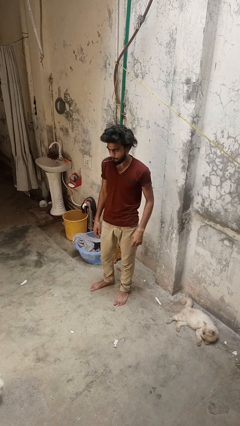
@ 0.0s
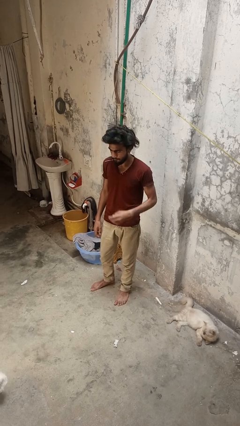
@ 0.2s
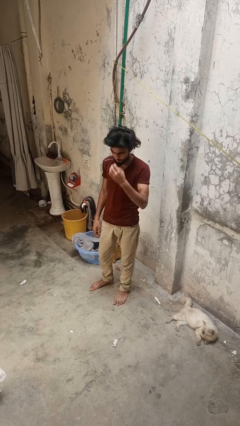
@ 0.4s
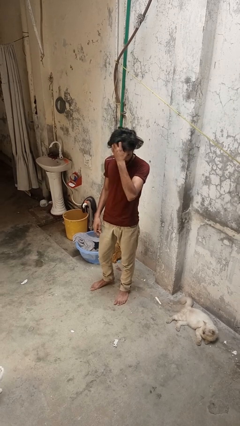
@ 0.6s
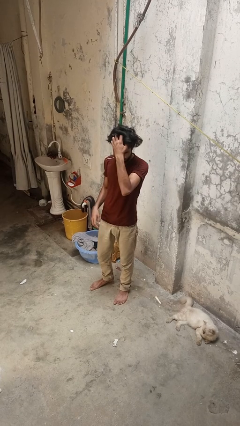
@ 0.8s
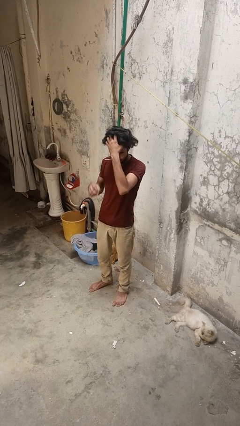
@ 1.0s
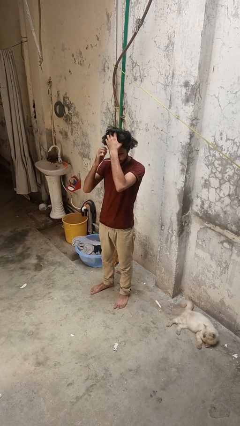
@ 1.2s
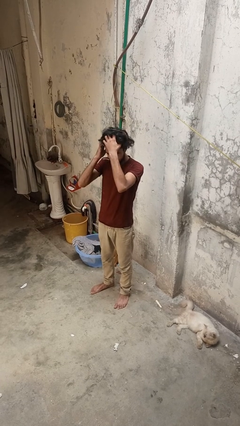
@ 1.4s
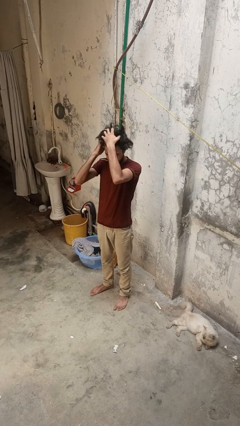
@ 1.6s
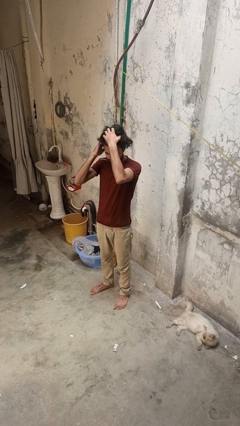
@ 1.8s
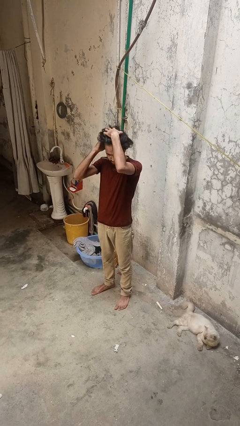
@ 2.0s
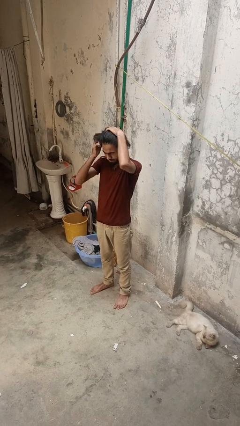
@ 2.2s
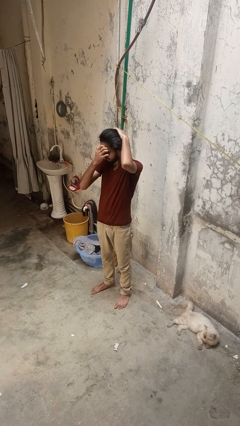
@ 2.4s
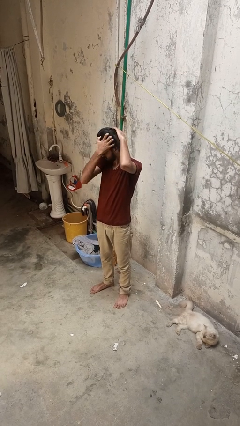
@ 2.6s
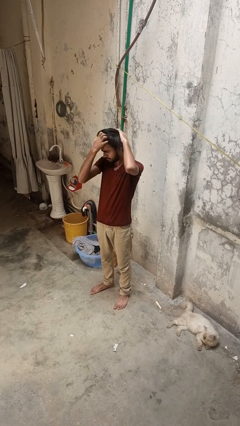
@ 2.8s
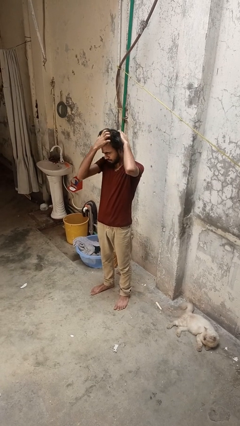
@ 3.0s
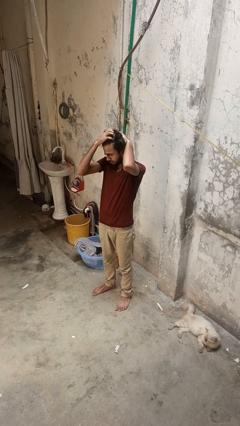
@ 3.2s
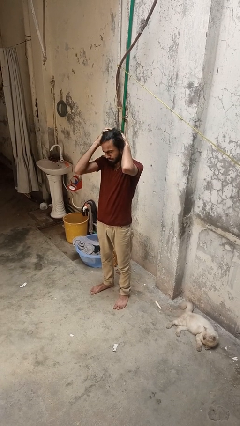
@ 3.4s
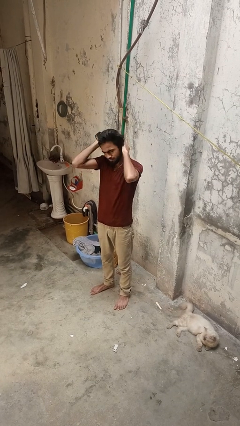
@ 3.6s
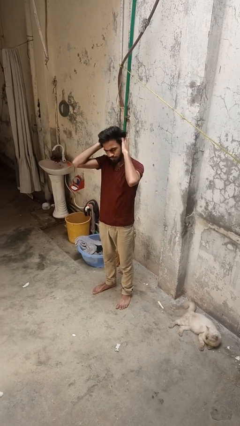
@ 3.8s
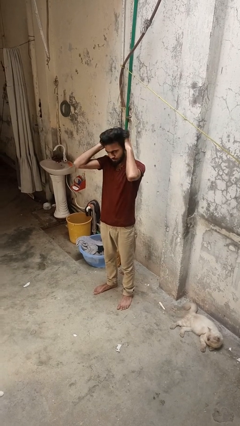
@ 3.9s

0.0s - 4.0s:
person scratches face

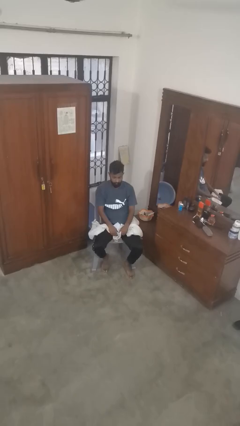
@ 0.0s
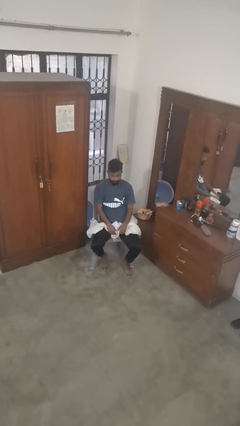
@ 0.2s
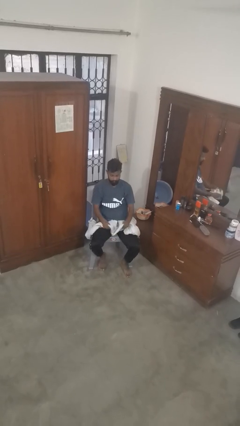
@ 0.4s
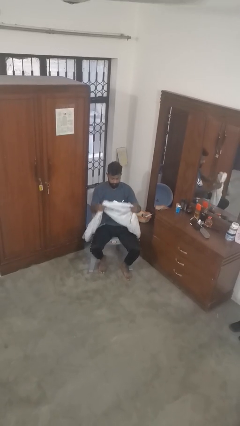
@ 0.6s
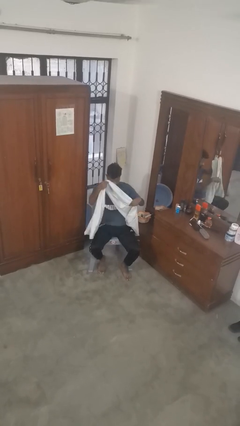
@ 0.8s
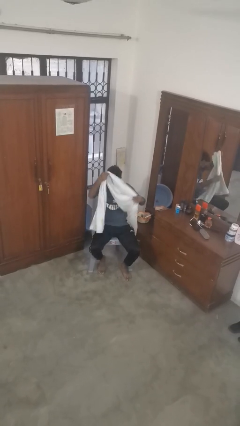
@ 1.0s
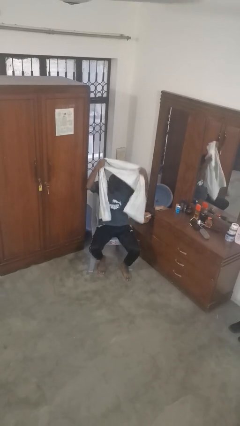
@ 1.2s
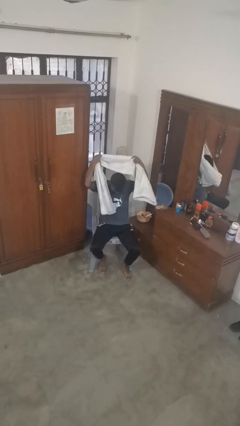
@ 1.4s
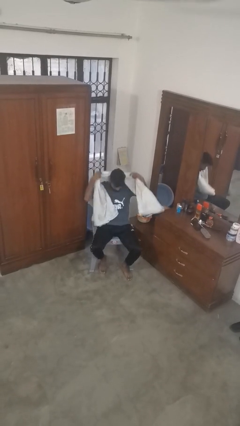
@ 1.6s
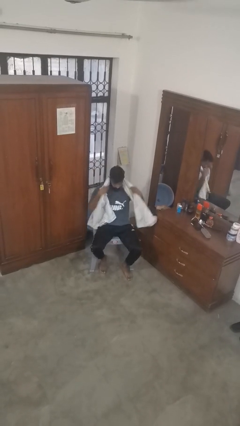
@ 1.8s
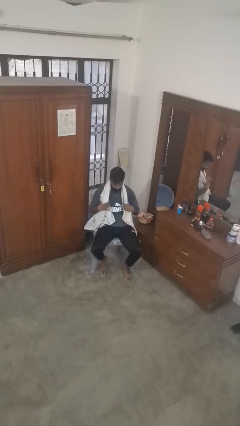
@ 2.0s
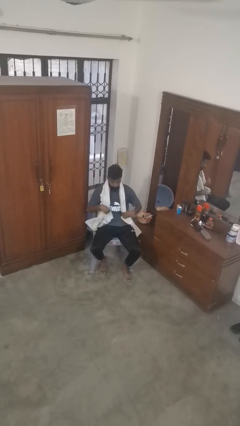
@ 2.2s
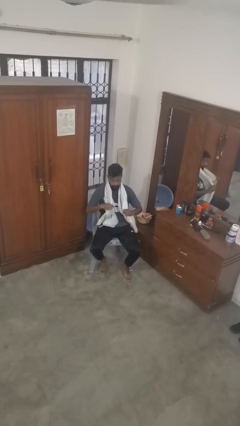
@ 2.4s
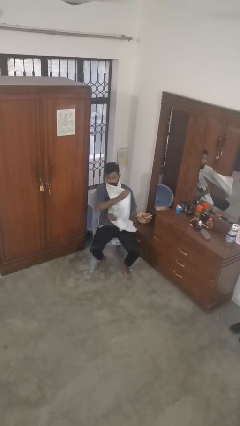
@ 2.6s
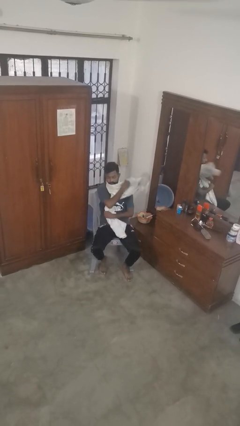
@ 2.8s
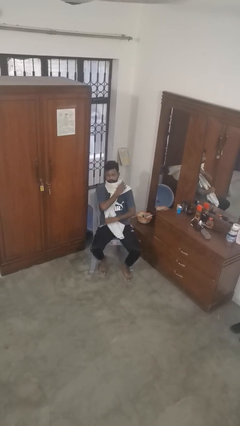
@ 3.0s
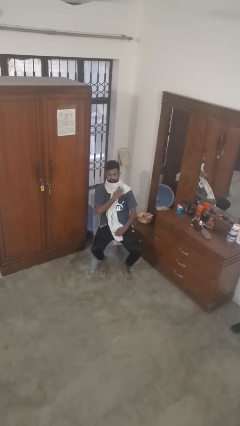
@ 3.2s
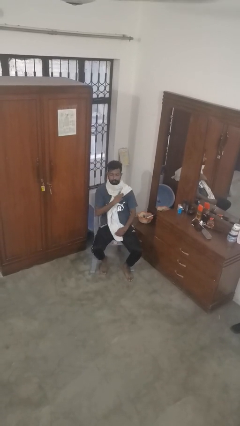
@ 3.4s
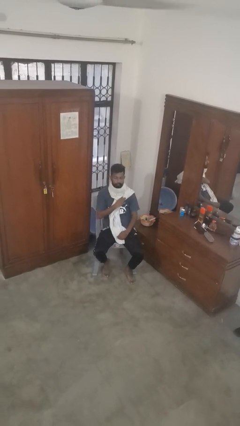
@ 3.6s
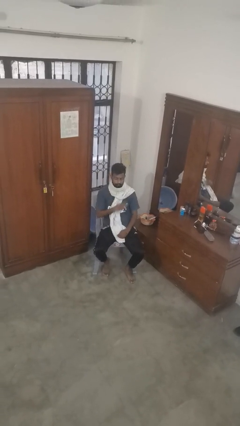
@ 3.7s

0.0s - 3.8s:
person puts on scarf

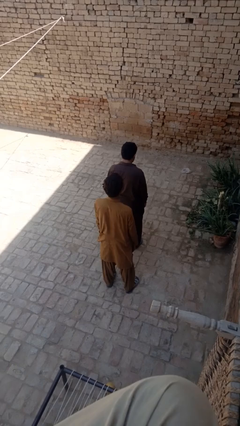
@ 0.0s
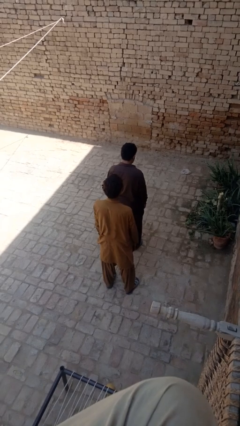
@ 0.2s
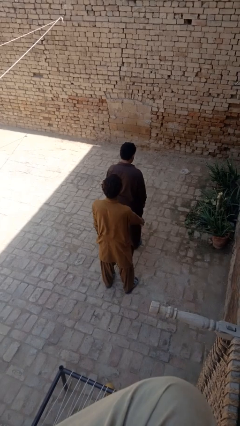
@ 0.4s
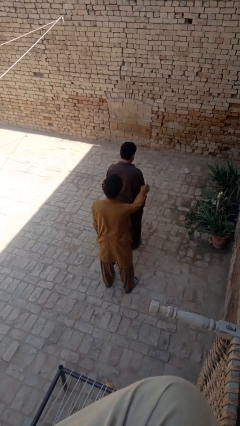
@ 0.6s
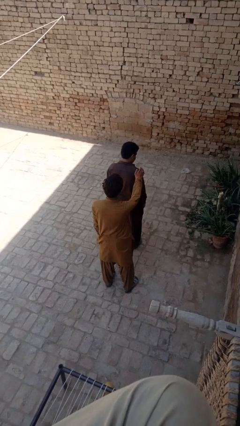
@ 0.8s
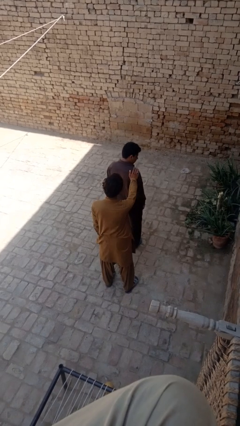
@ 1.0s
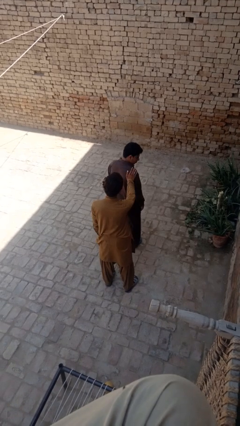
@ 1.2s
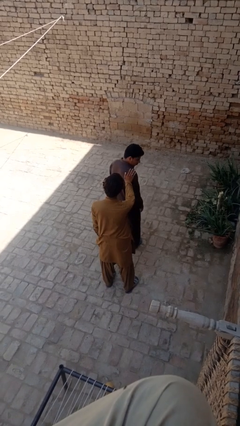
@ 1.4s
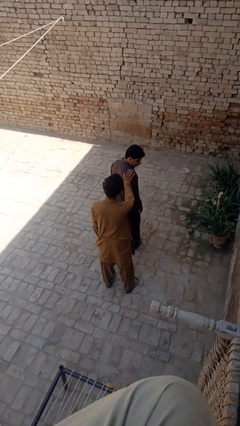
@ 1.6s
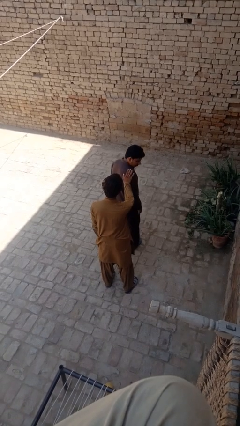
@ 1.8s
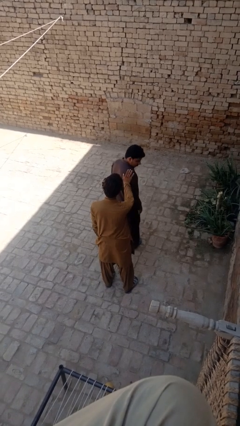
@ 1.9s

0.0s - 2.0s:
person looks over shoulder

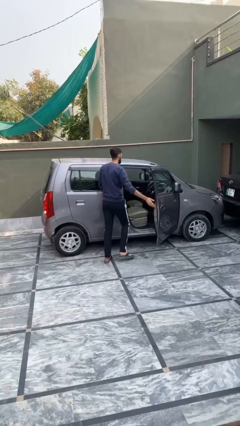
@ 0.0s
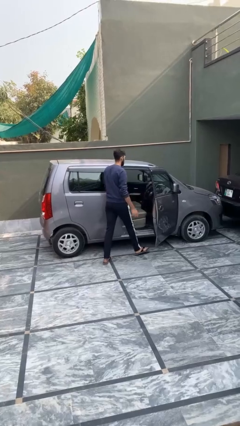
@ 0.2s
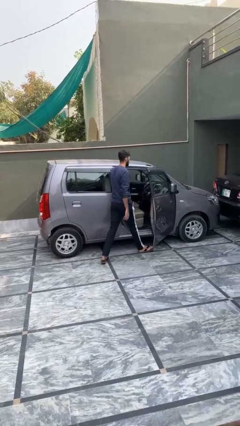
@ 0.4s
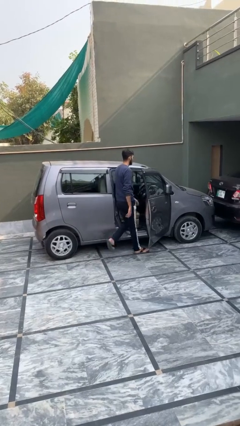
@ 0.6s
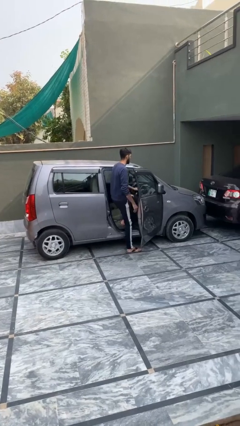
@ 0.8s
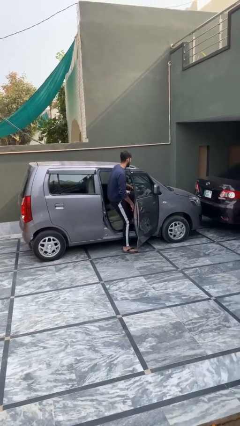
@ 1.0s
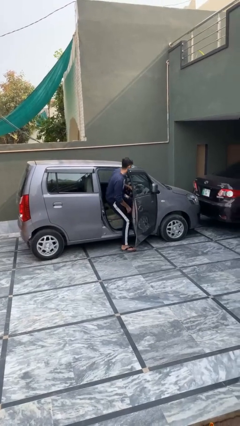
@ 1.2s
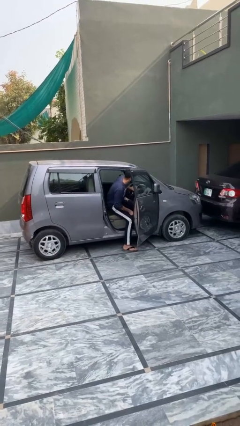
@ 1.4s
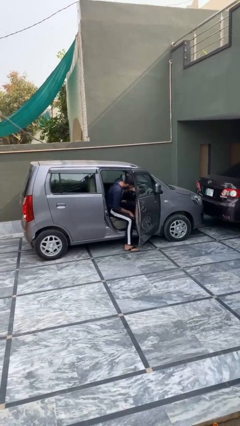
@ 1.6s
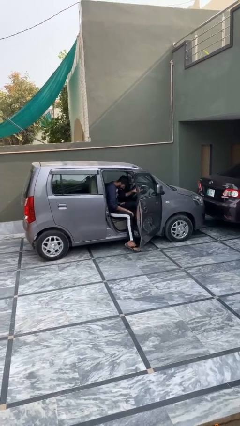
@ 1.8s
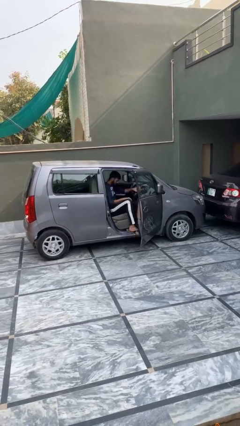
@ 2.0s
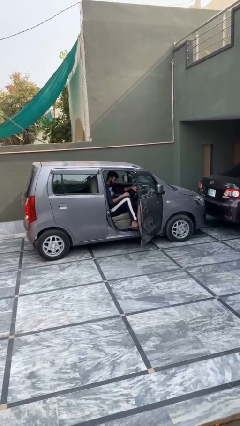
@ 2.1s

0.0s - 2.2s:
person enters car

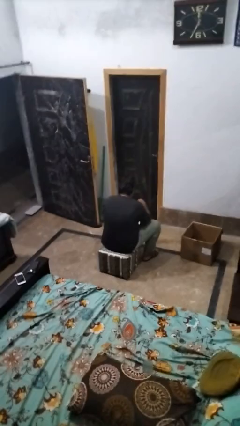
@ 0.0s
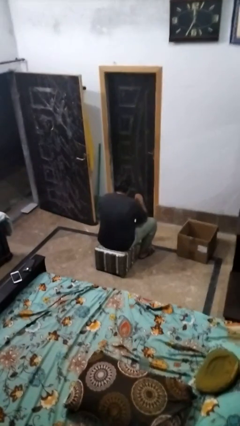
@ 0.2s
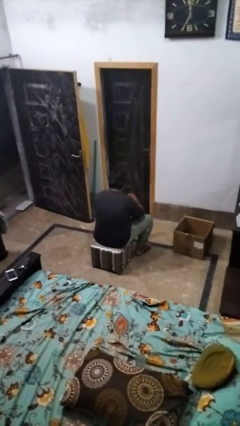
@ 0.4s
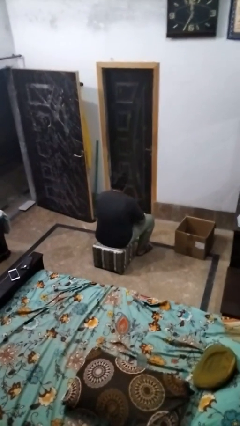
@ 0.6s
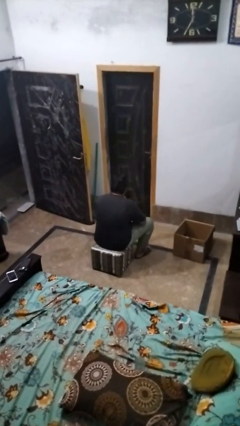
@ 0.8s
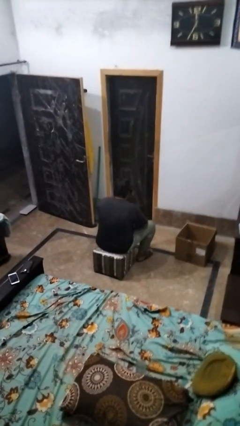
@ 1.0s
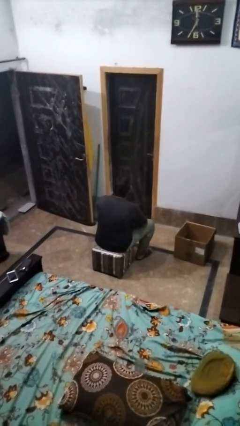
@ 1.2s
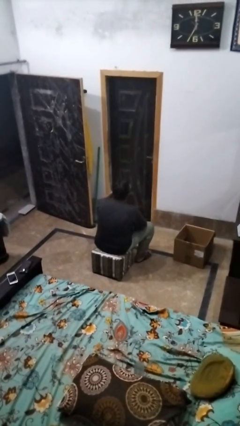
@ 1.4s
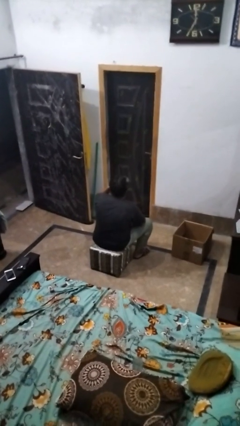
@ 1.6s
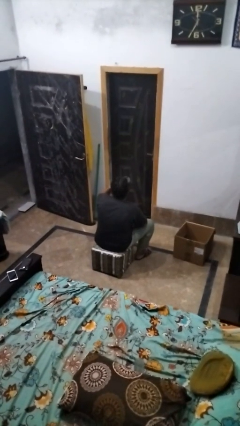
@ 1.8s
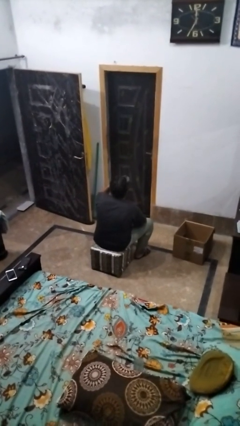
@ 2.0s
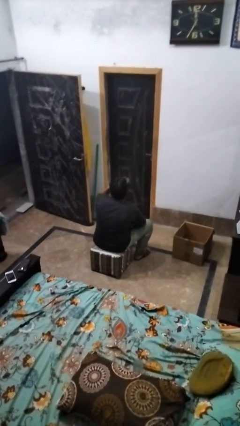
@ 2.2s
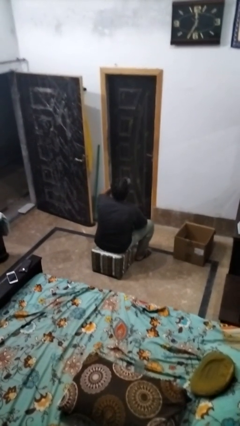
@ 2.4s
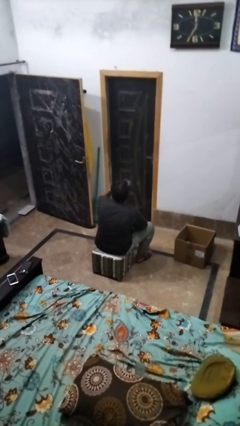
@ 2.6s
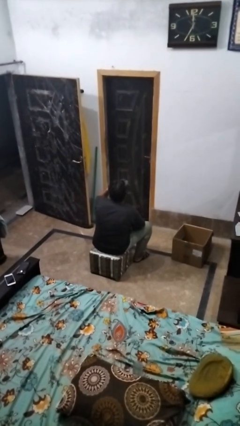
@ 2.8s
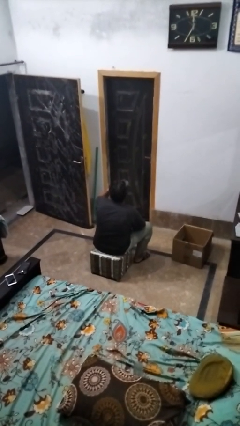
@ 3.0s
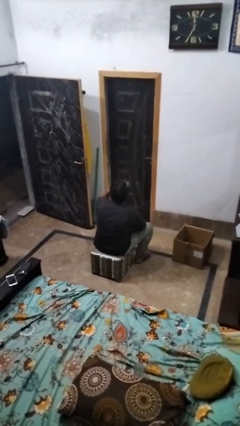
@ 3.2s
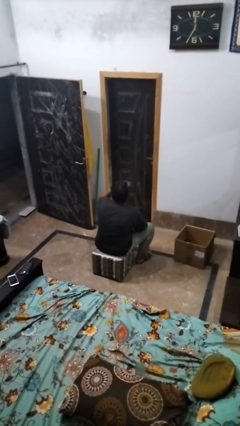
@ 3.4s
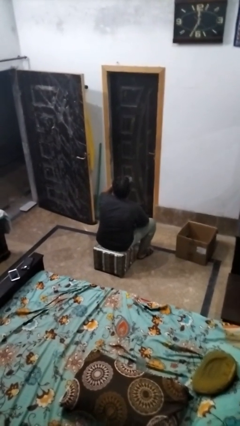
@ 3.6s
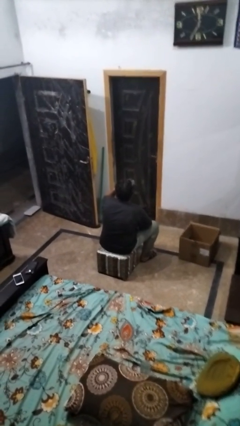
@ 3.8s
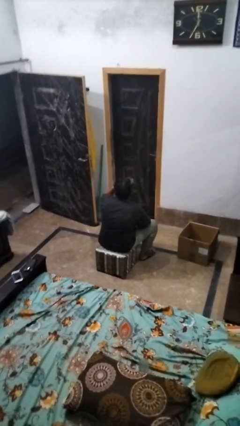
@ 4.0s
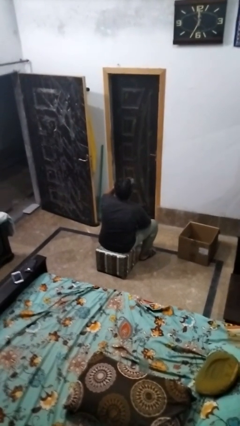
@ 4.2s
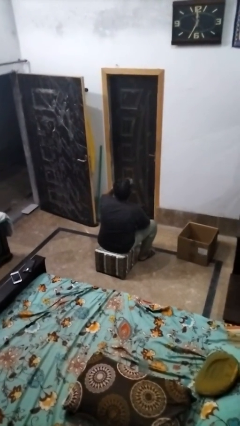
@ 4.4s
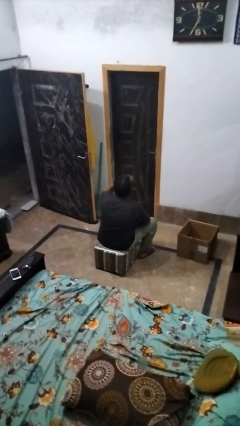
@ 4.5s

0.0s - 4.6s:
person drinks from mug

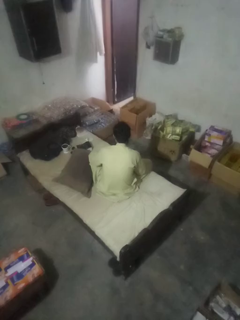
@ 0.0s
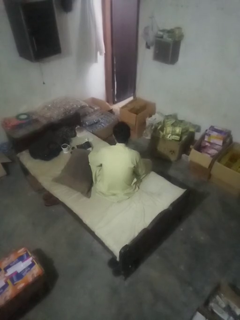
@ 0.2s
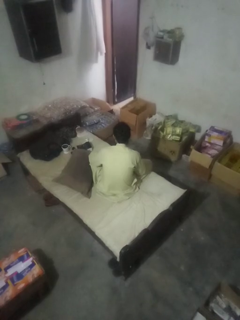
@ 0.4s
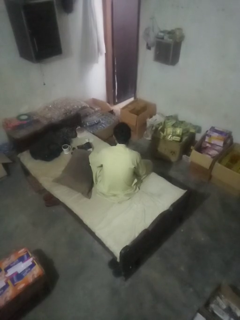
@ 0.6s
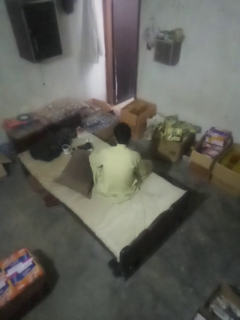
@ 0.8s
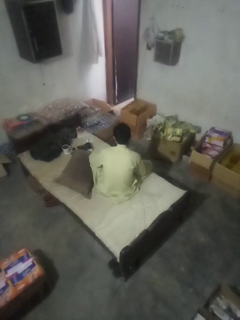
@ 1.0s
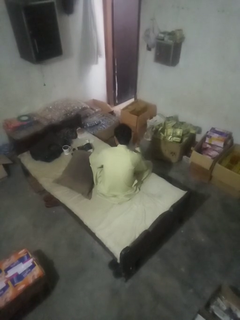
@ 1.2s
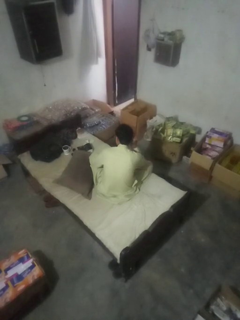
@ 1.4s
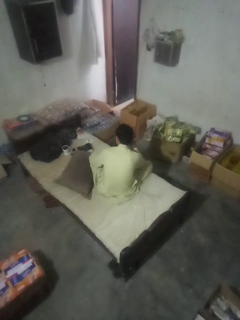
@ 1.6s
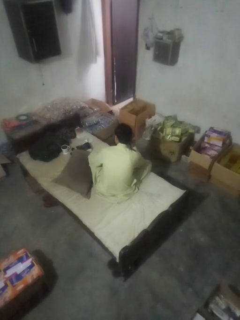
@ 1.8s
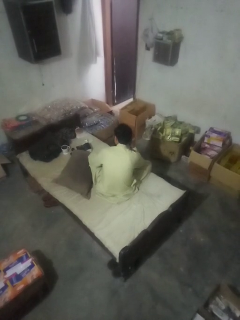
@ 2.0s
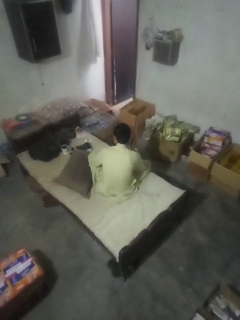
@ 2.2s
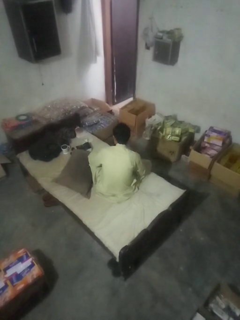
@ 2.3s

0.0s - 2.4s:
person gestures listen closely
